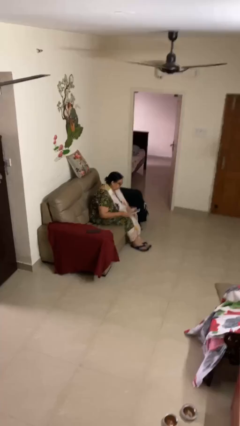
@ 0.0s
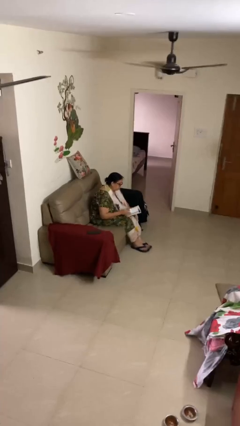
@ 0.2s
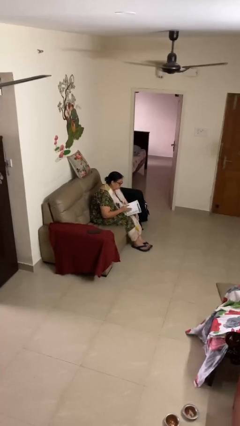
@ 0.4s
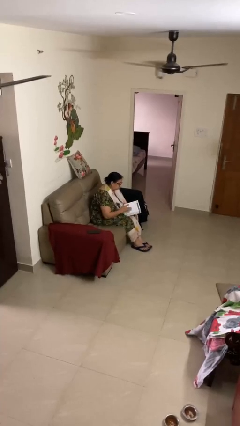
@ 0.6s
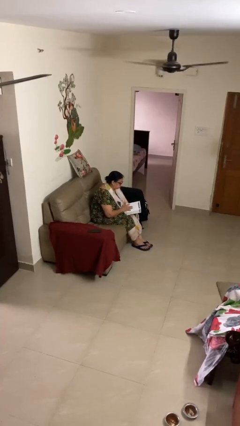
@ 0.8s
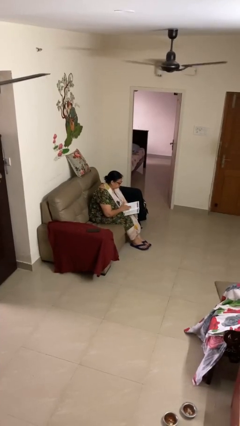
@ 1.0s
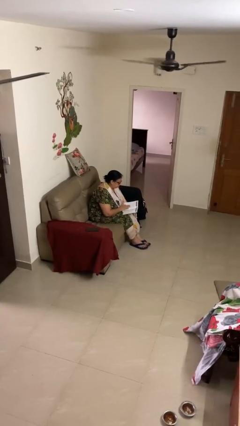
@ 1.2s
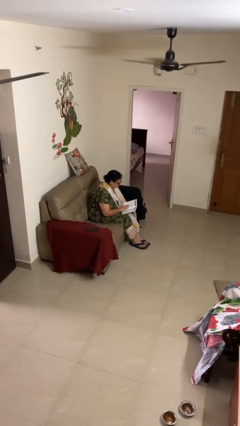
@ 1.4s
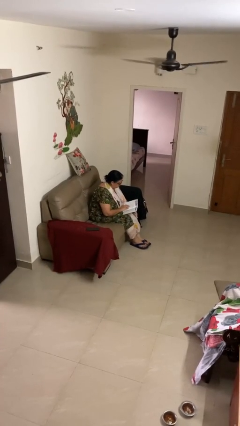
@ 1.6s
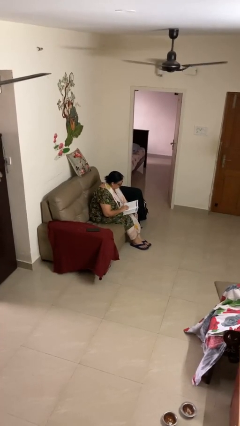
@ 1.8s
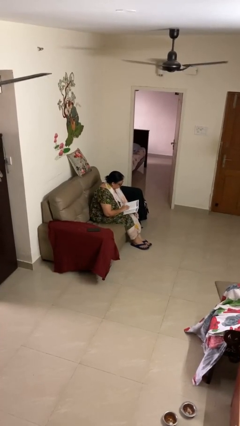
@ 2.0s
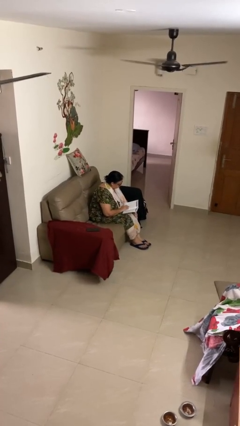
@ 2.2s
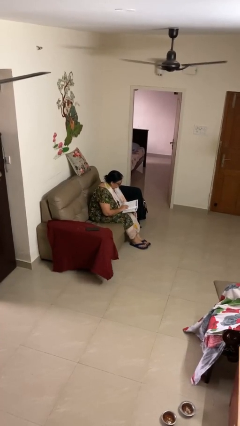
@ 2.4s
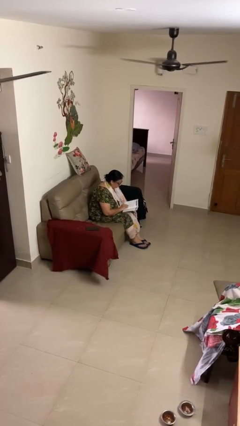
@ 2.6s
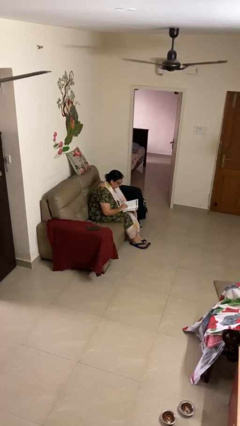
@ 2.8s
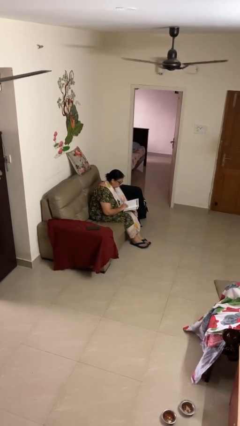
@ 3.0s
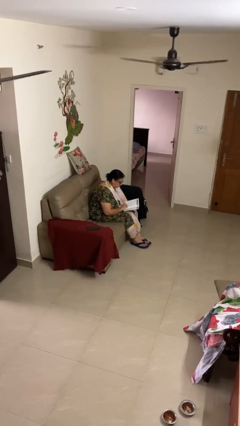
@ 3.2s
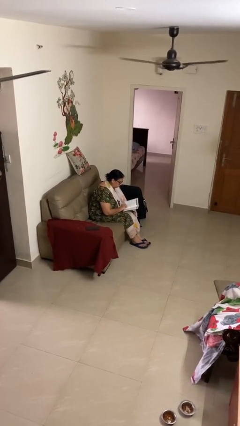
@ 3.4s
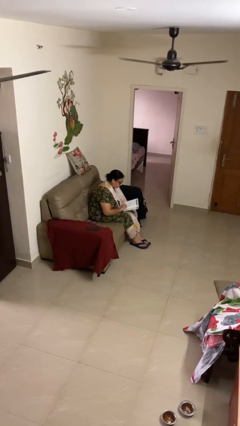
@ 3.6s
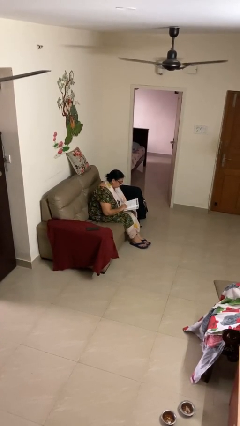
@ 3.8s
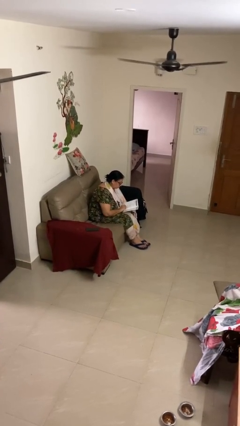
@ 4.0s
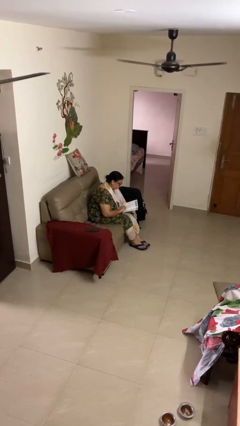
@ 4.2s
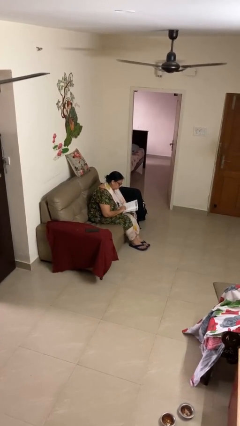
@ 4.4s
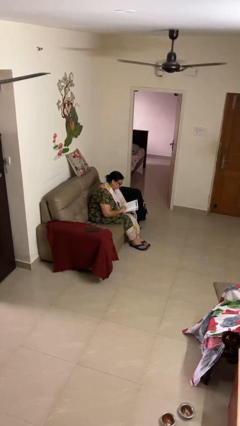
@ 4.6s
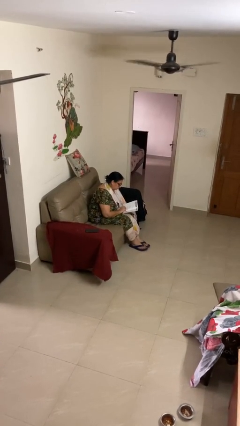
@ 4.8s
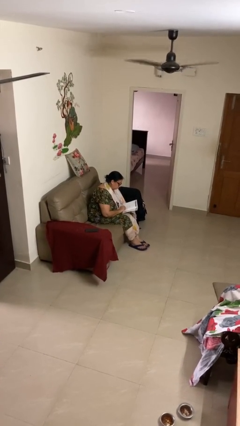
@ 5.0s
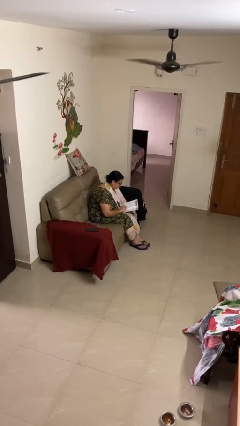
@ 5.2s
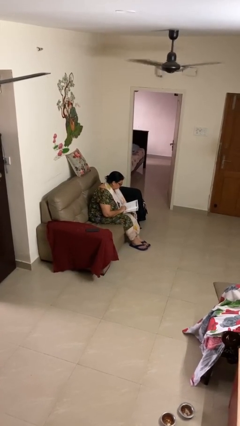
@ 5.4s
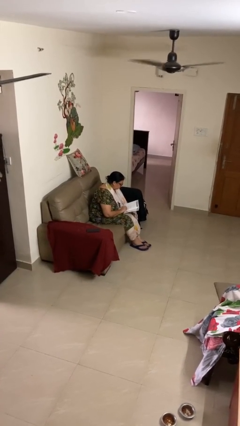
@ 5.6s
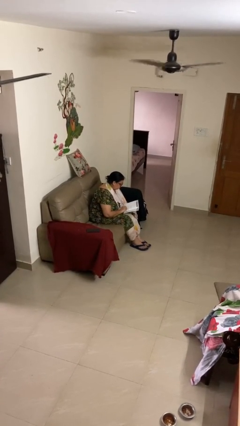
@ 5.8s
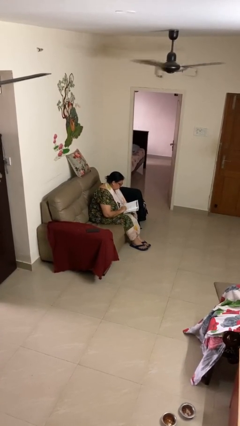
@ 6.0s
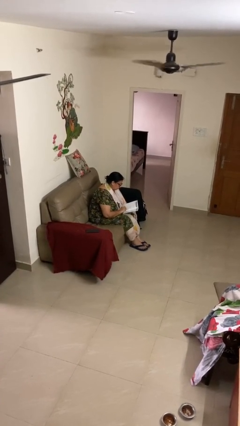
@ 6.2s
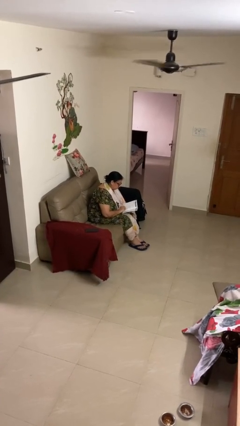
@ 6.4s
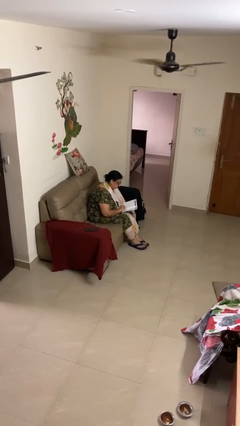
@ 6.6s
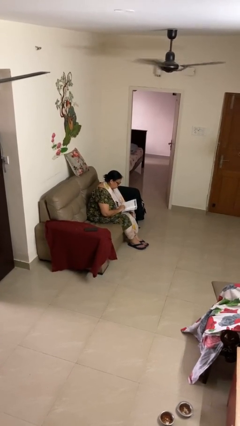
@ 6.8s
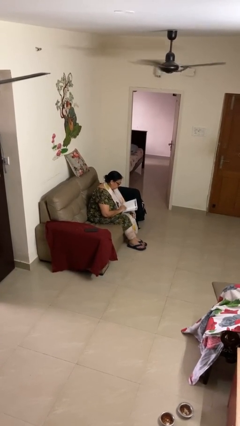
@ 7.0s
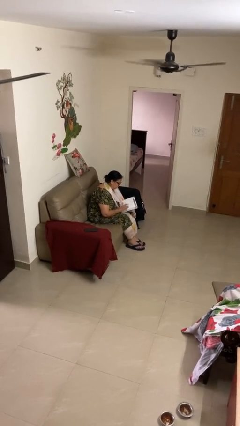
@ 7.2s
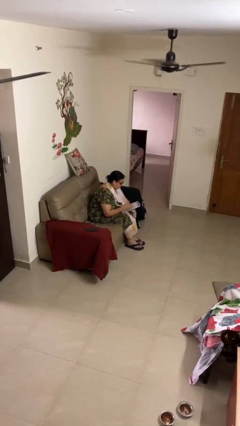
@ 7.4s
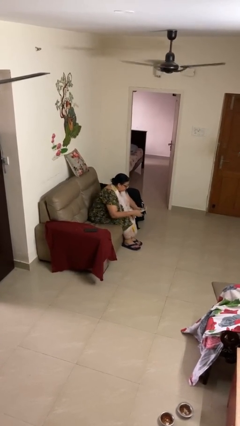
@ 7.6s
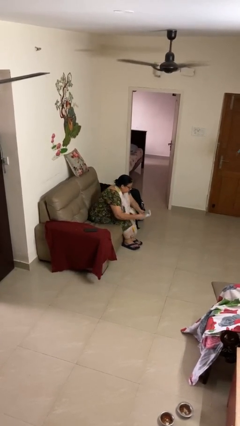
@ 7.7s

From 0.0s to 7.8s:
person reads document

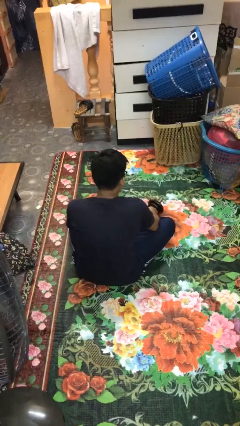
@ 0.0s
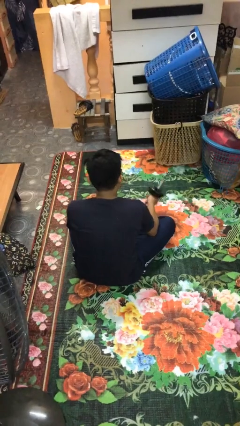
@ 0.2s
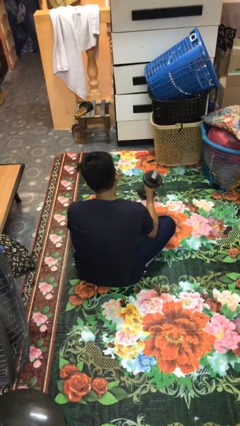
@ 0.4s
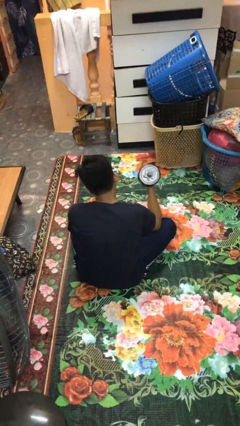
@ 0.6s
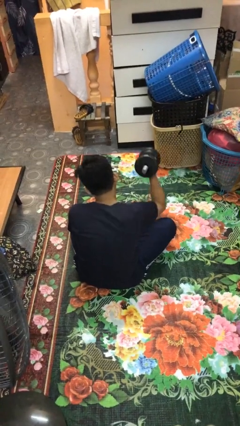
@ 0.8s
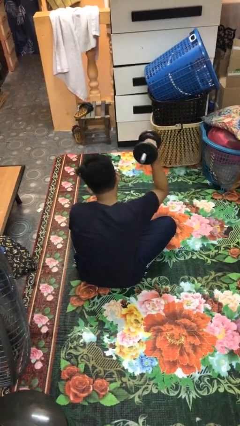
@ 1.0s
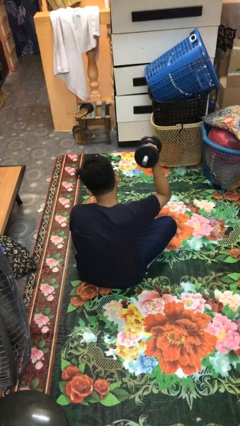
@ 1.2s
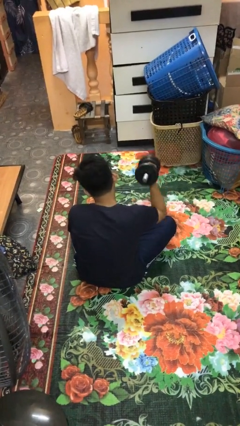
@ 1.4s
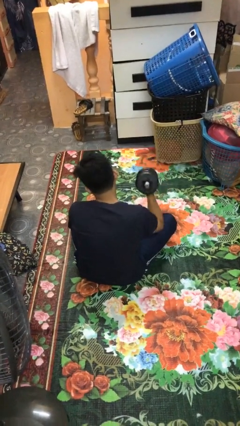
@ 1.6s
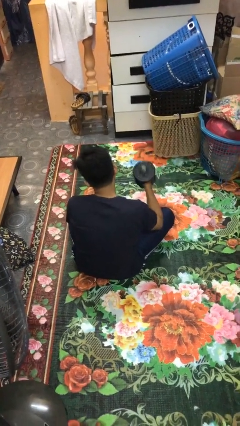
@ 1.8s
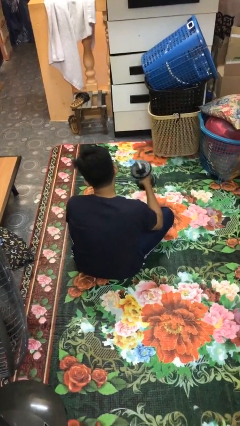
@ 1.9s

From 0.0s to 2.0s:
person lifts dumbbells

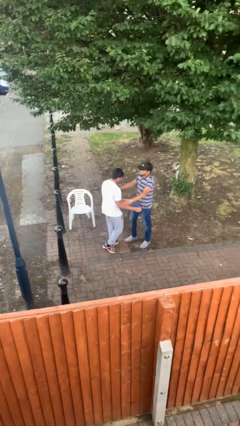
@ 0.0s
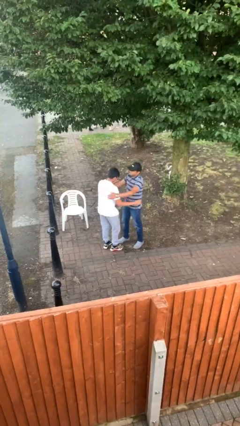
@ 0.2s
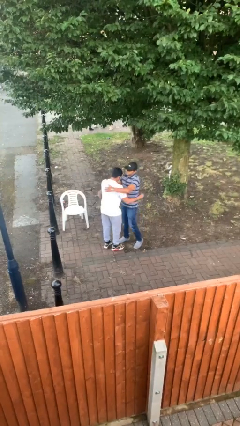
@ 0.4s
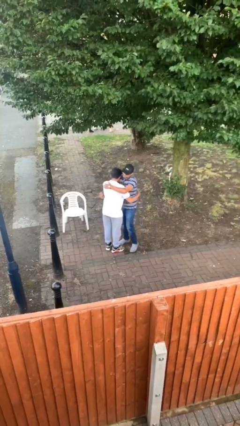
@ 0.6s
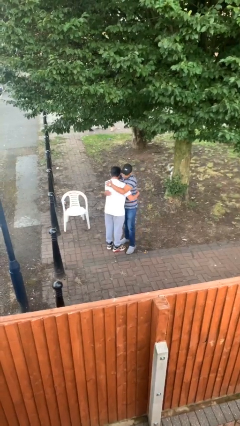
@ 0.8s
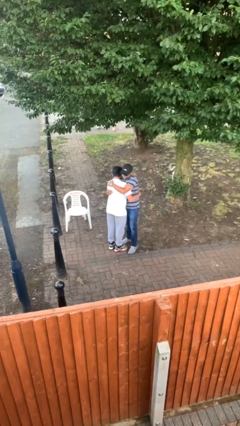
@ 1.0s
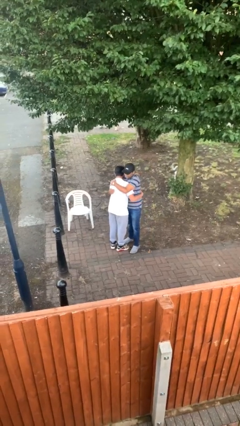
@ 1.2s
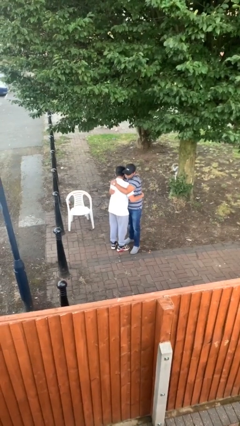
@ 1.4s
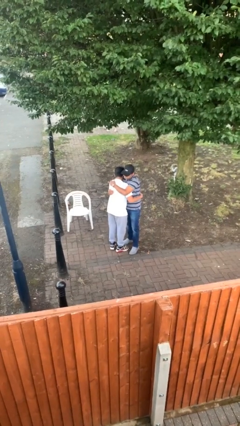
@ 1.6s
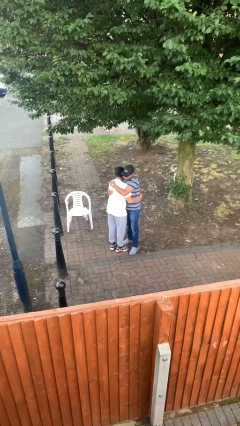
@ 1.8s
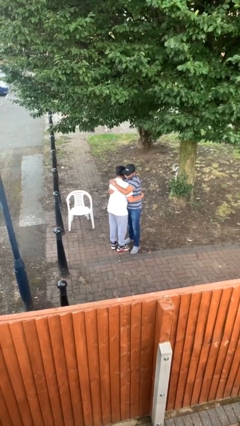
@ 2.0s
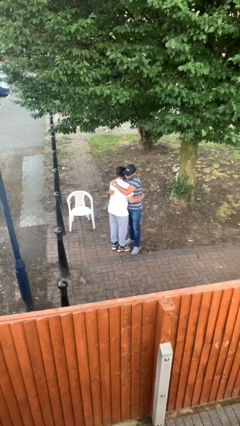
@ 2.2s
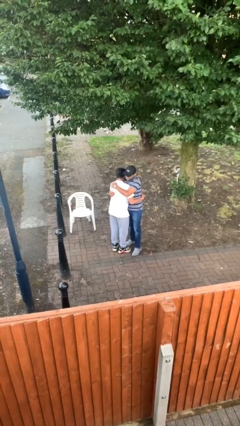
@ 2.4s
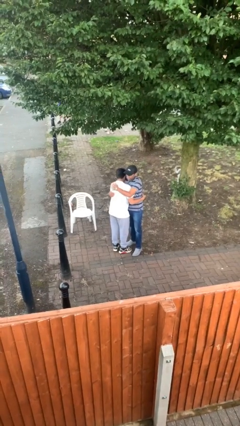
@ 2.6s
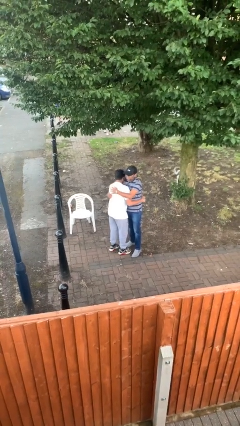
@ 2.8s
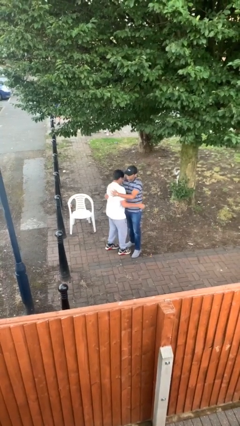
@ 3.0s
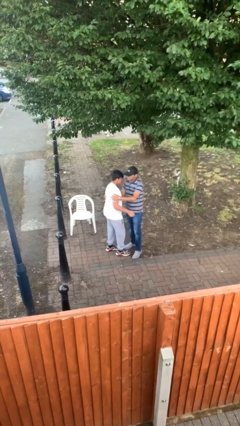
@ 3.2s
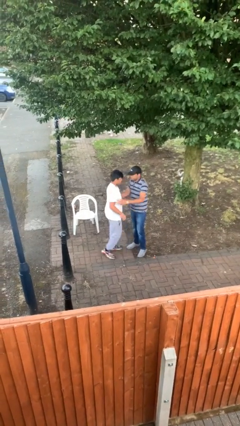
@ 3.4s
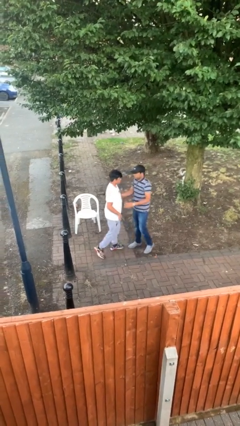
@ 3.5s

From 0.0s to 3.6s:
person embraces person

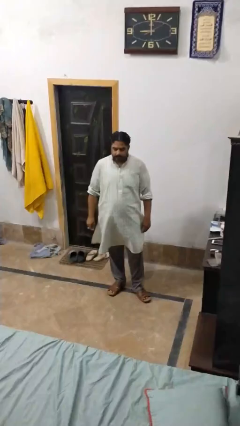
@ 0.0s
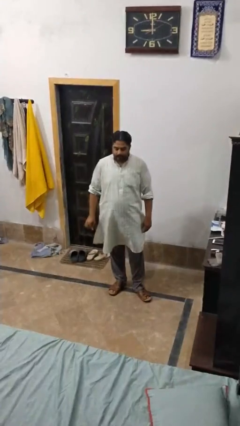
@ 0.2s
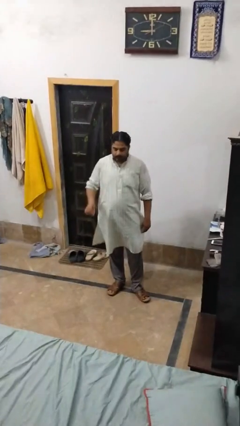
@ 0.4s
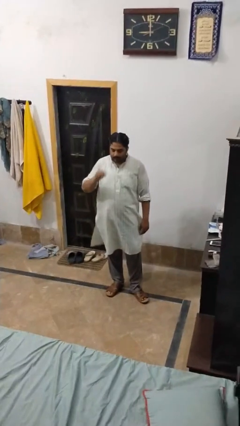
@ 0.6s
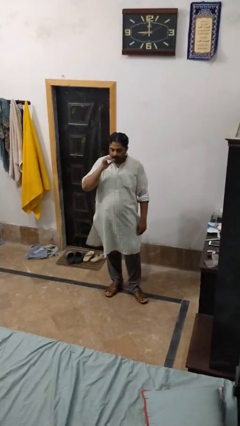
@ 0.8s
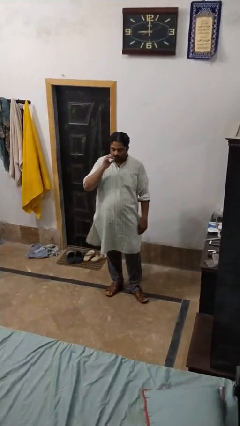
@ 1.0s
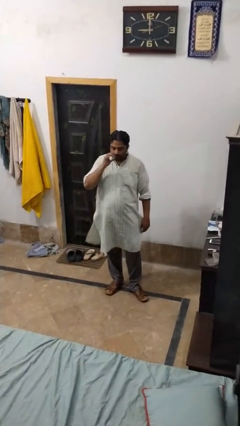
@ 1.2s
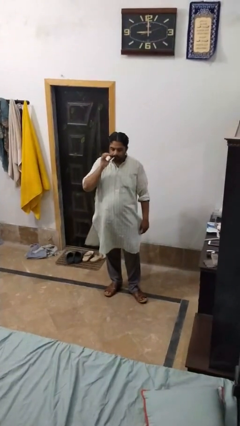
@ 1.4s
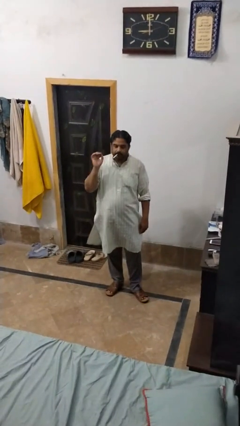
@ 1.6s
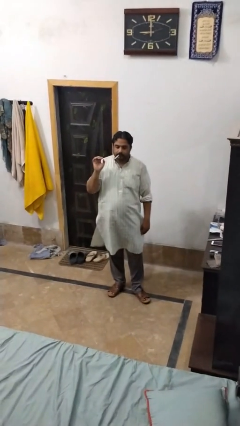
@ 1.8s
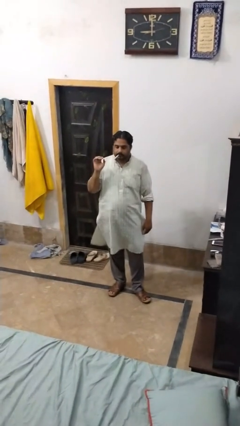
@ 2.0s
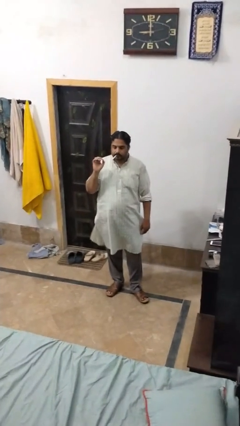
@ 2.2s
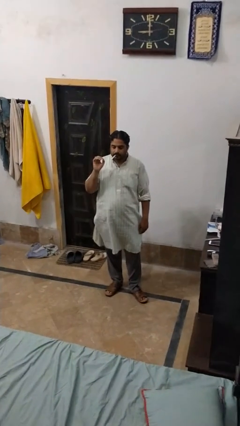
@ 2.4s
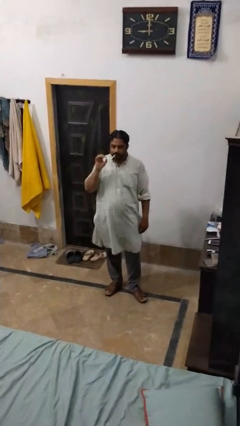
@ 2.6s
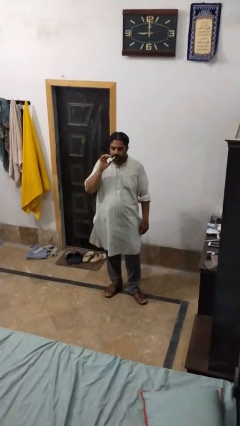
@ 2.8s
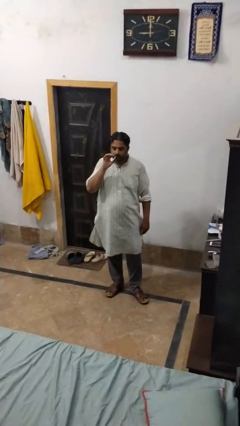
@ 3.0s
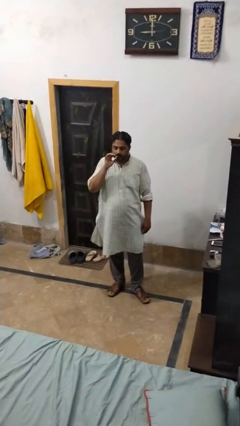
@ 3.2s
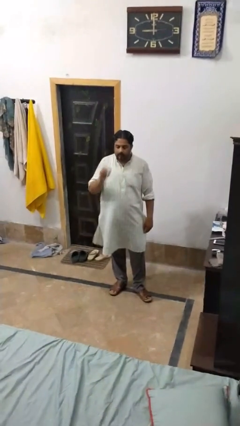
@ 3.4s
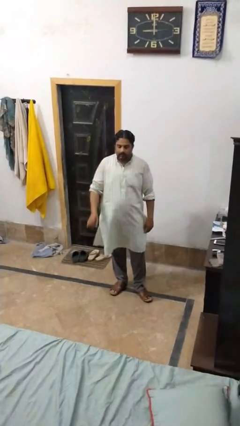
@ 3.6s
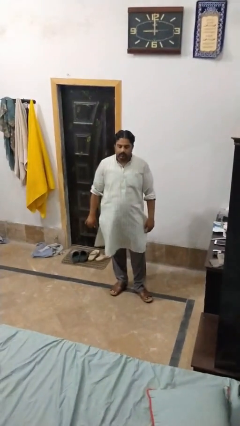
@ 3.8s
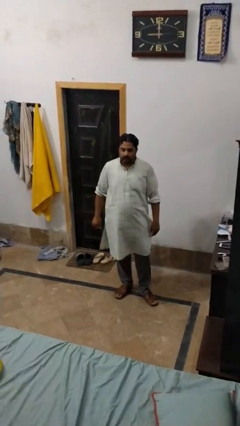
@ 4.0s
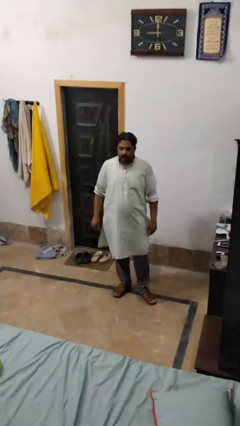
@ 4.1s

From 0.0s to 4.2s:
person vapes
